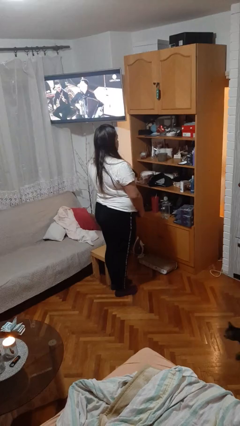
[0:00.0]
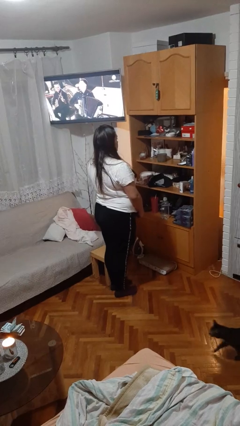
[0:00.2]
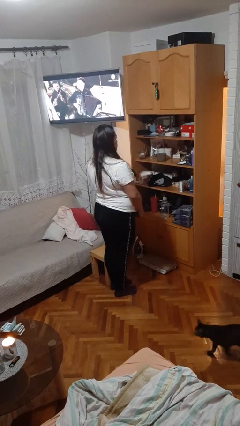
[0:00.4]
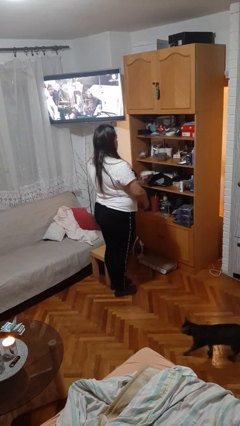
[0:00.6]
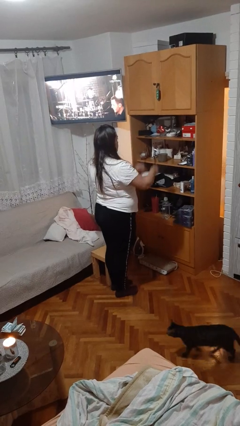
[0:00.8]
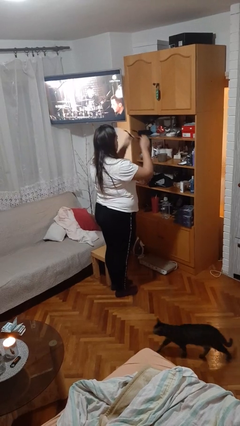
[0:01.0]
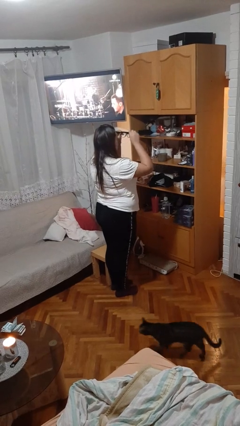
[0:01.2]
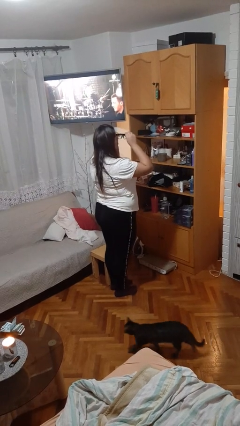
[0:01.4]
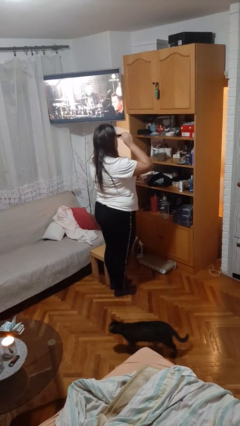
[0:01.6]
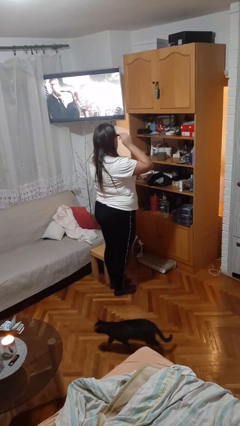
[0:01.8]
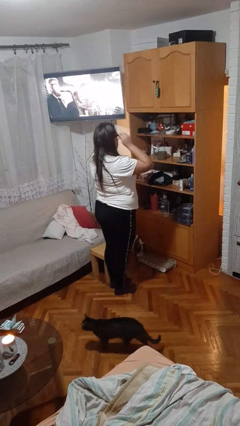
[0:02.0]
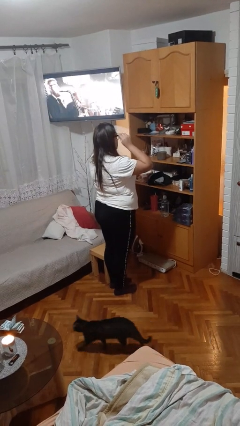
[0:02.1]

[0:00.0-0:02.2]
person puts on glasses

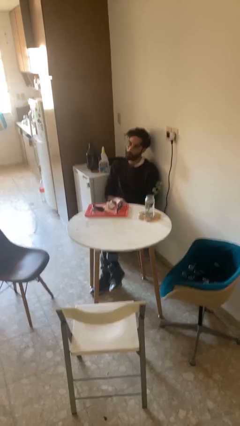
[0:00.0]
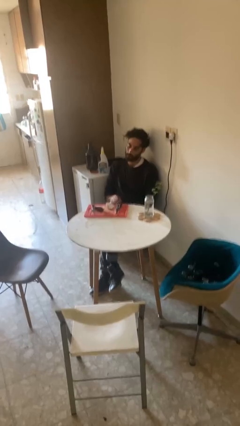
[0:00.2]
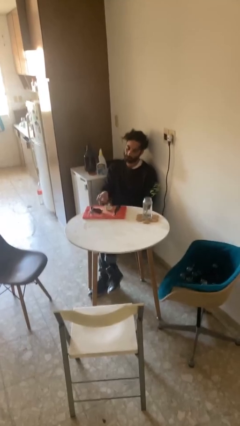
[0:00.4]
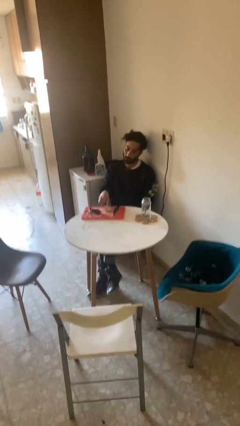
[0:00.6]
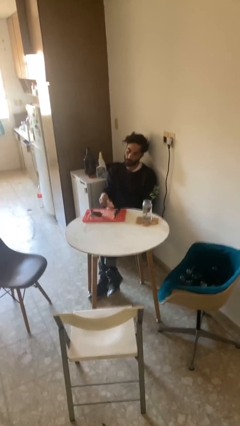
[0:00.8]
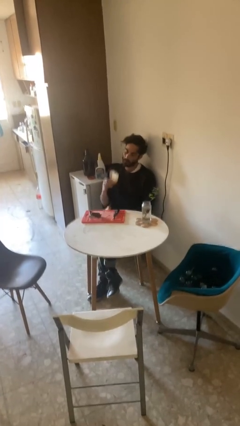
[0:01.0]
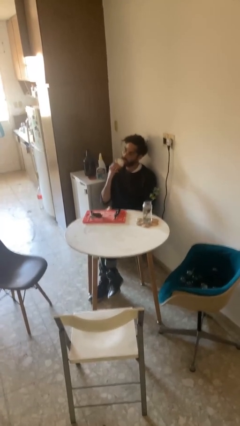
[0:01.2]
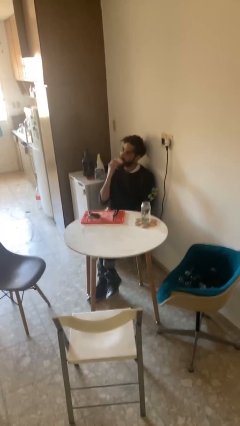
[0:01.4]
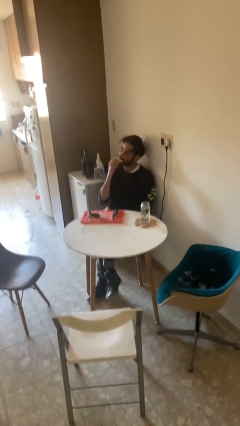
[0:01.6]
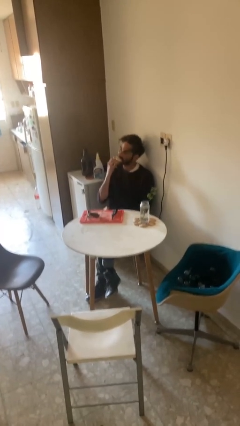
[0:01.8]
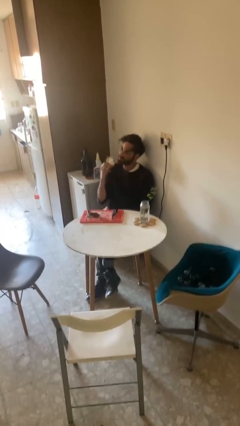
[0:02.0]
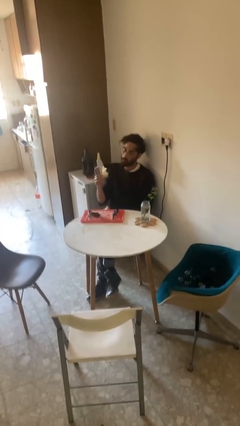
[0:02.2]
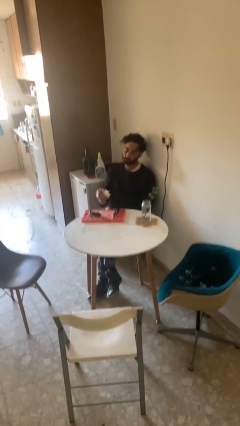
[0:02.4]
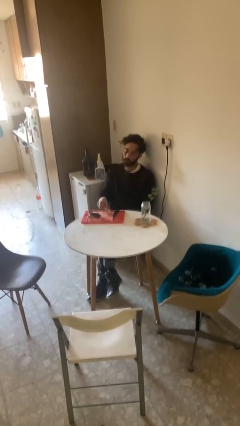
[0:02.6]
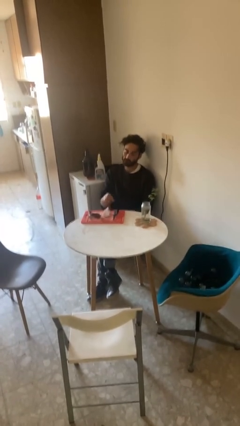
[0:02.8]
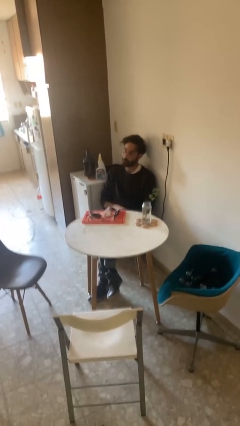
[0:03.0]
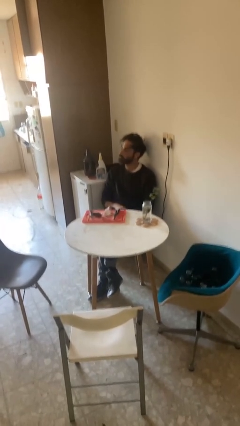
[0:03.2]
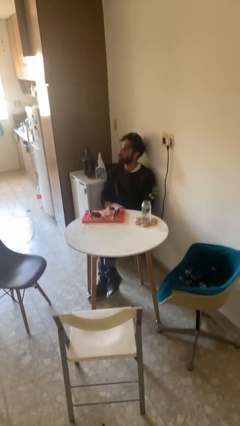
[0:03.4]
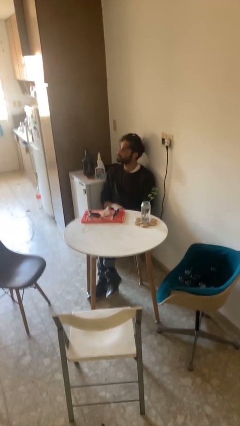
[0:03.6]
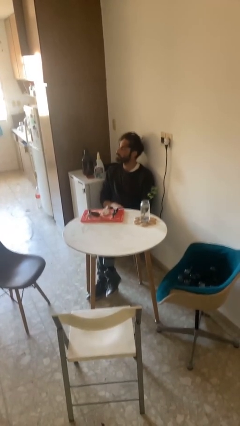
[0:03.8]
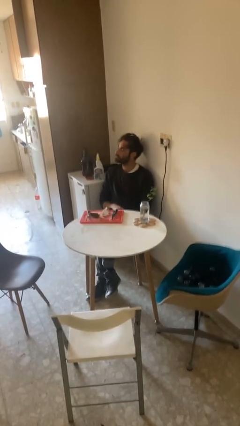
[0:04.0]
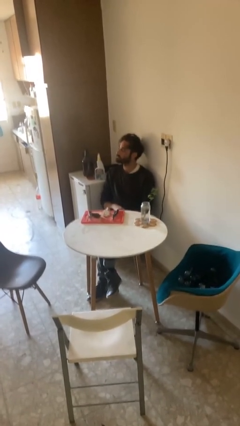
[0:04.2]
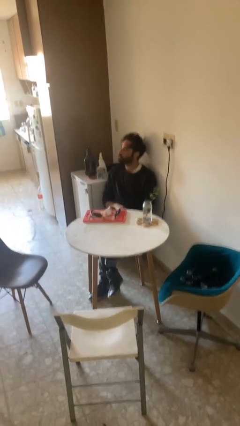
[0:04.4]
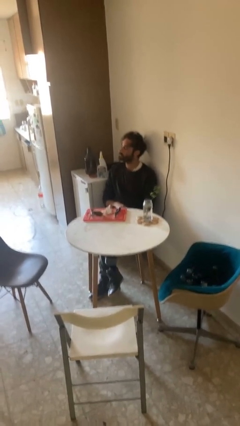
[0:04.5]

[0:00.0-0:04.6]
person eats with hands

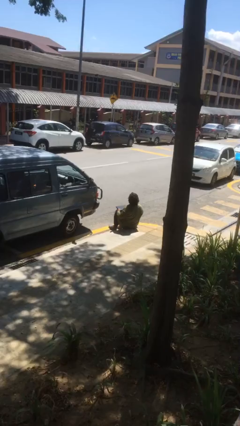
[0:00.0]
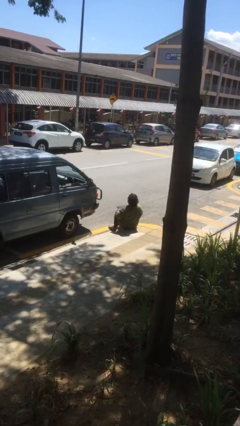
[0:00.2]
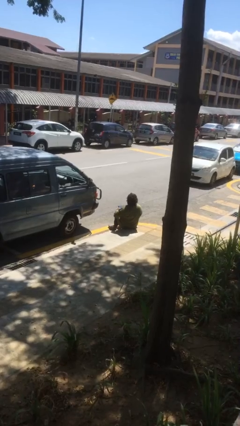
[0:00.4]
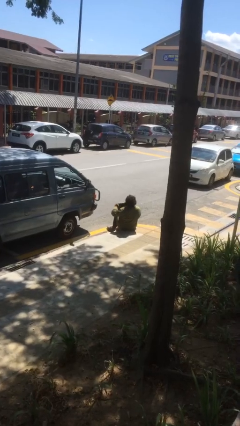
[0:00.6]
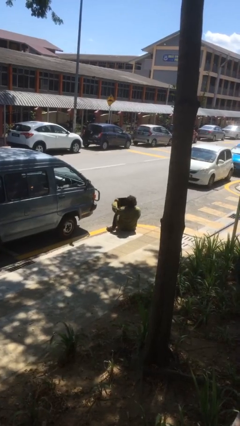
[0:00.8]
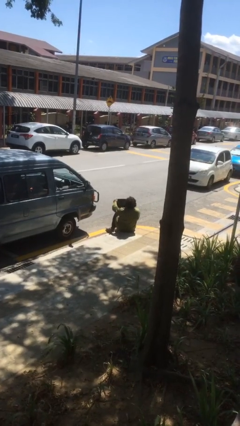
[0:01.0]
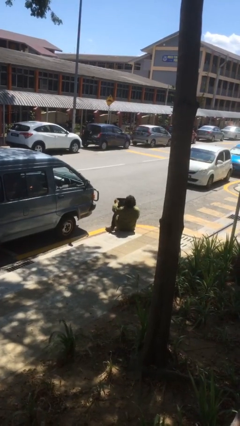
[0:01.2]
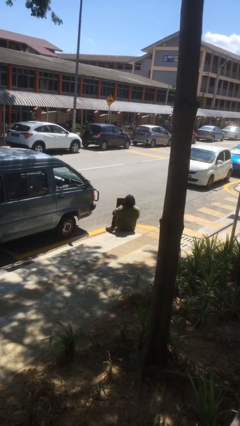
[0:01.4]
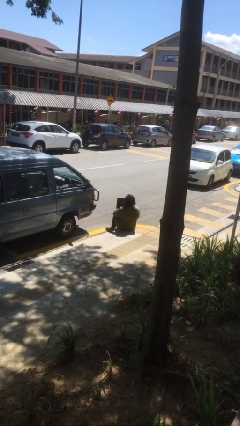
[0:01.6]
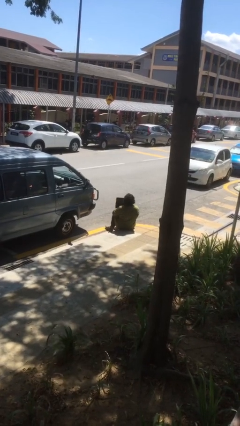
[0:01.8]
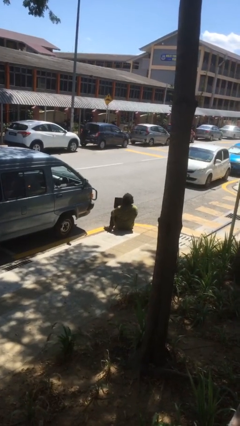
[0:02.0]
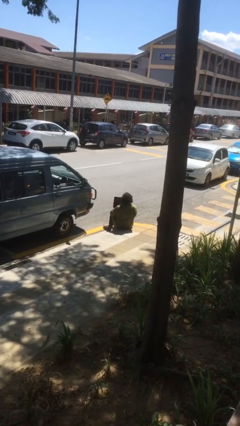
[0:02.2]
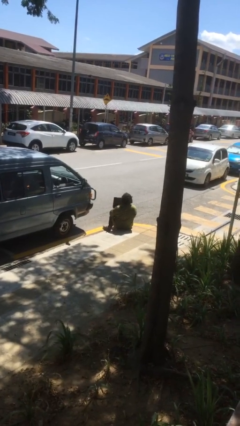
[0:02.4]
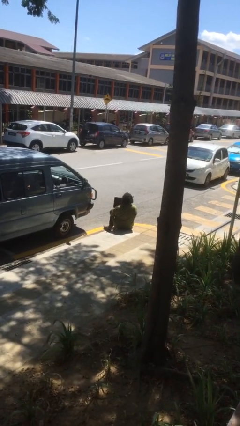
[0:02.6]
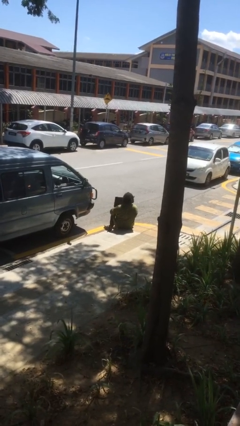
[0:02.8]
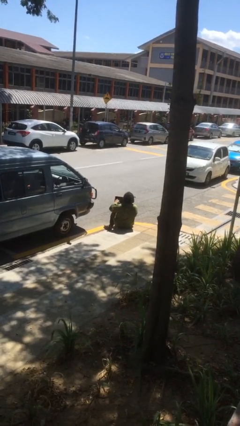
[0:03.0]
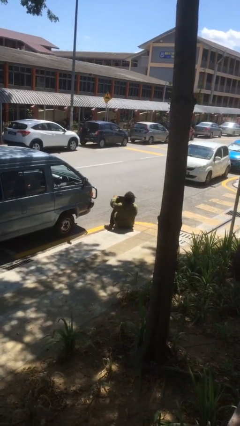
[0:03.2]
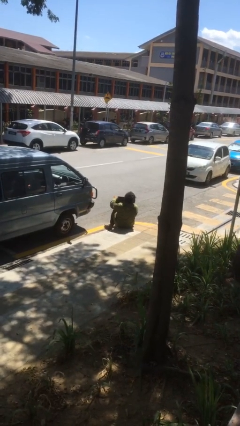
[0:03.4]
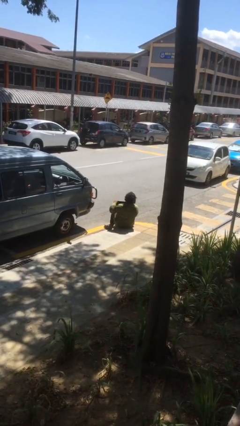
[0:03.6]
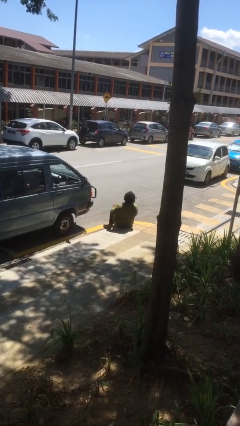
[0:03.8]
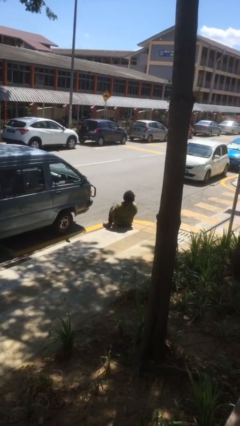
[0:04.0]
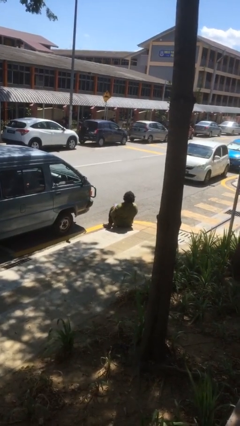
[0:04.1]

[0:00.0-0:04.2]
person interacts with laptop

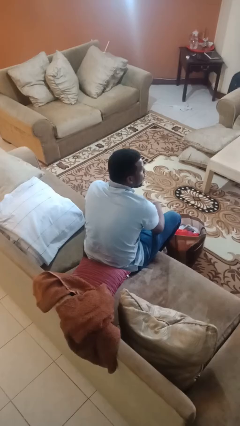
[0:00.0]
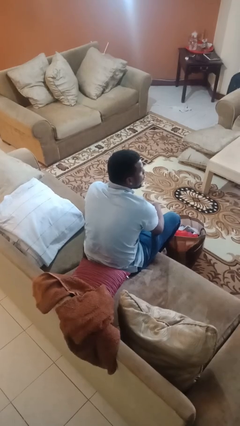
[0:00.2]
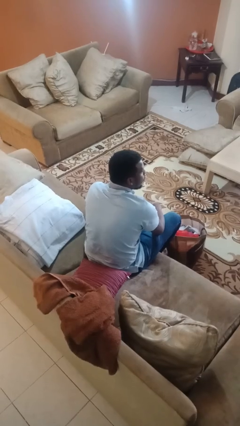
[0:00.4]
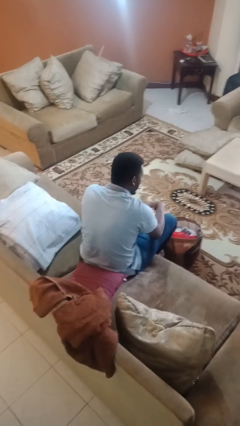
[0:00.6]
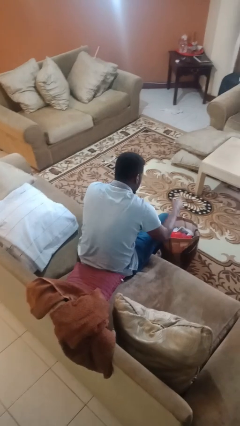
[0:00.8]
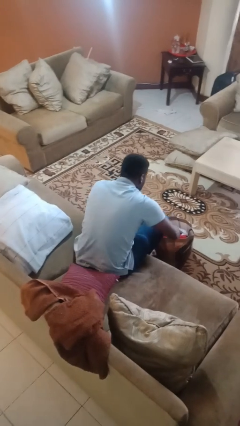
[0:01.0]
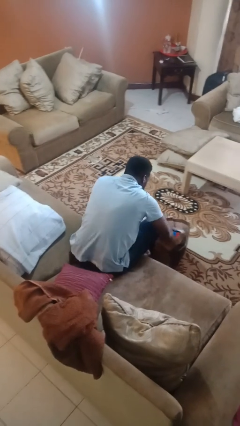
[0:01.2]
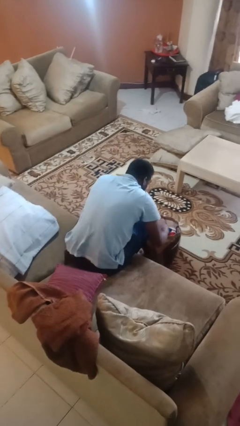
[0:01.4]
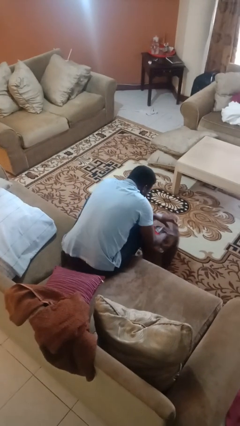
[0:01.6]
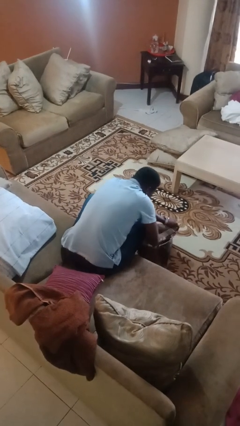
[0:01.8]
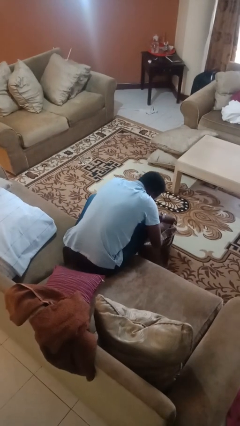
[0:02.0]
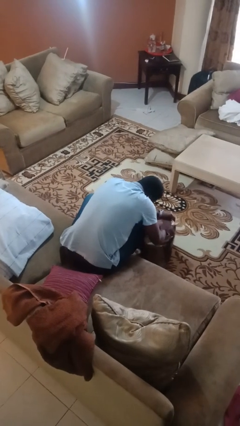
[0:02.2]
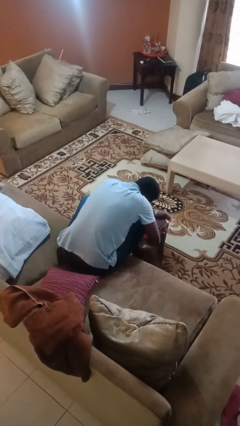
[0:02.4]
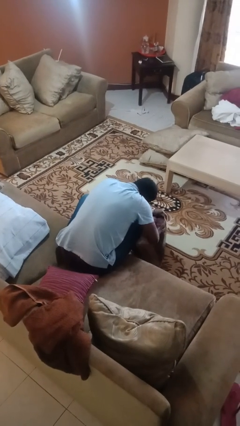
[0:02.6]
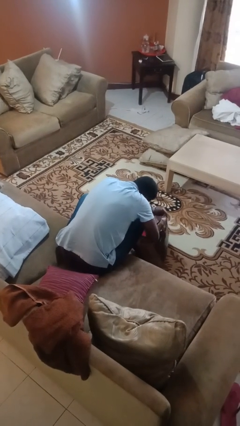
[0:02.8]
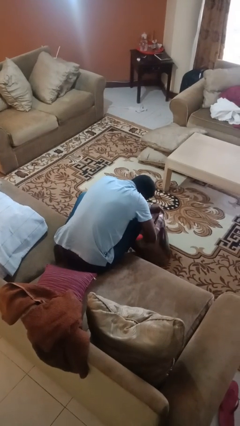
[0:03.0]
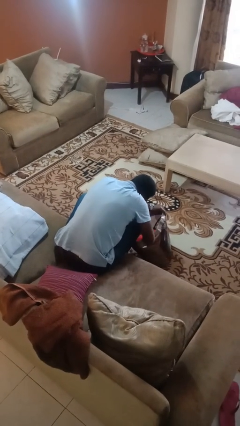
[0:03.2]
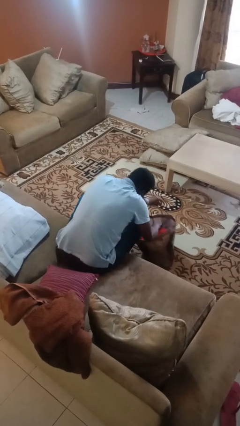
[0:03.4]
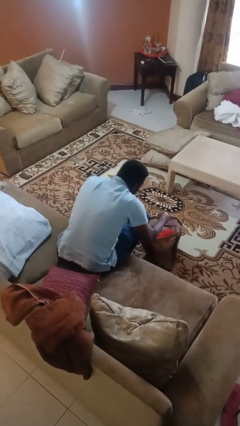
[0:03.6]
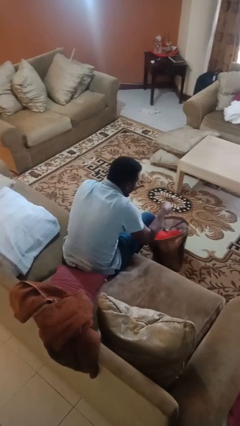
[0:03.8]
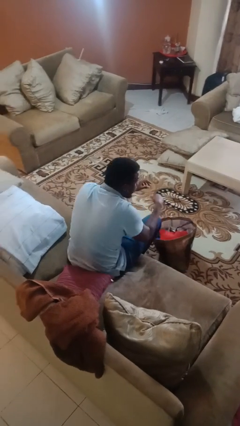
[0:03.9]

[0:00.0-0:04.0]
person searches in bag

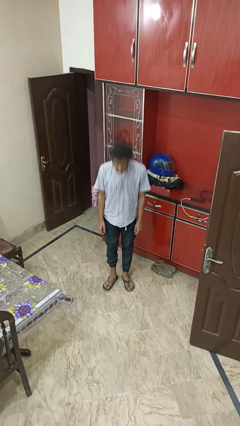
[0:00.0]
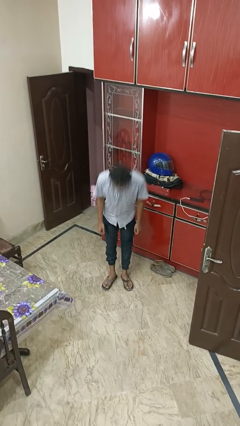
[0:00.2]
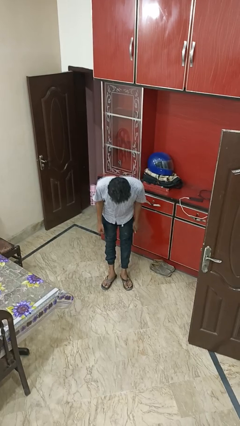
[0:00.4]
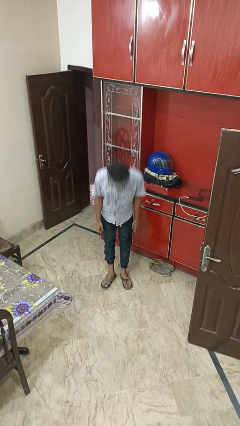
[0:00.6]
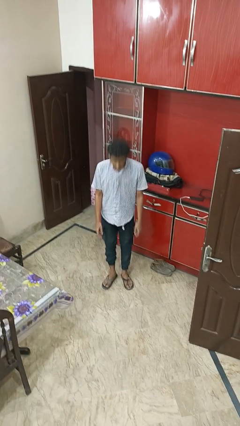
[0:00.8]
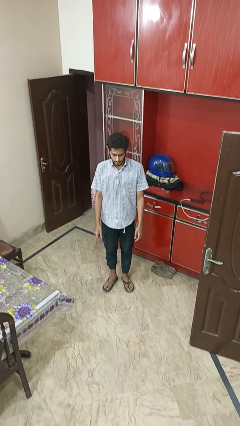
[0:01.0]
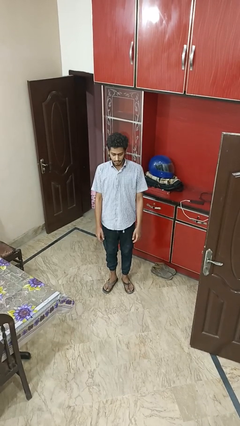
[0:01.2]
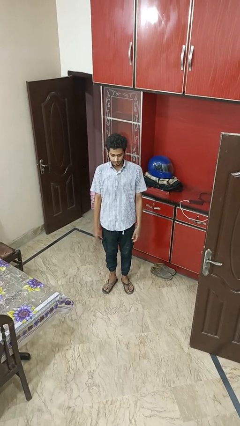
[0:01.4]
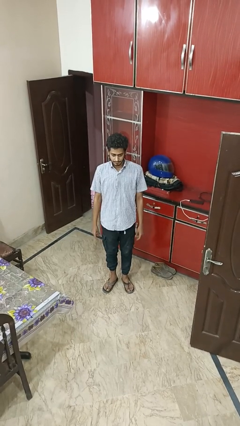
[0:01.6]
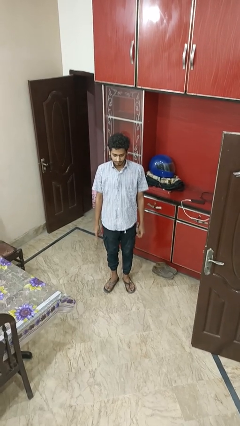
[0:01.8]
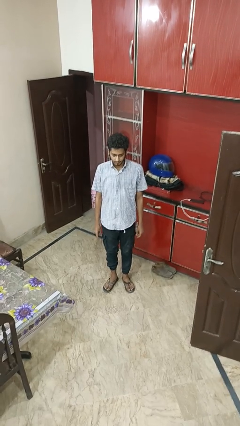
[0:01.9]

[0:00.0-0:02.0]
person bows

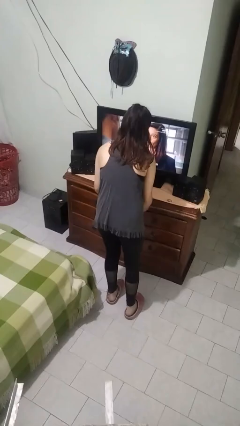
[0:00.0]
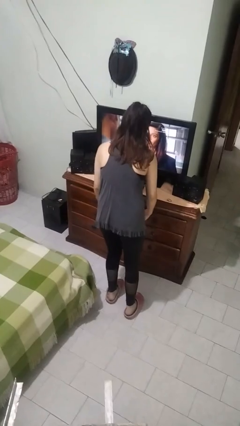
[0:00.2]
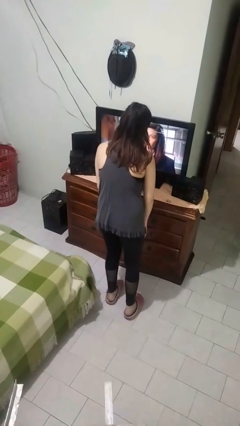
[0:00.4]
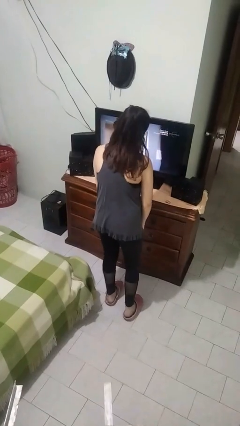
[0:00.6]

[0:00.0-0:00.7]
person closes dresser drawer
